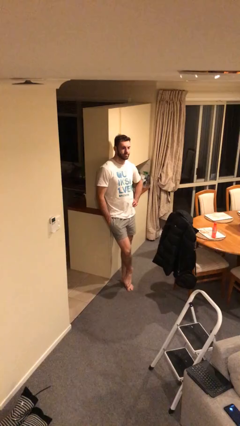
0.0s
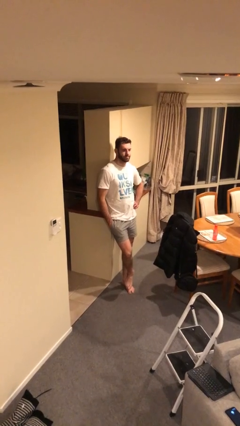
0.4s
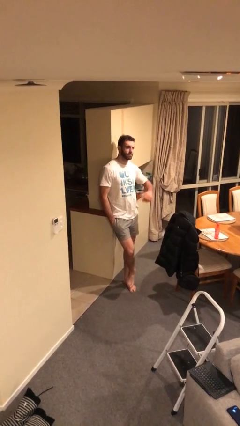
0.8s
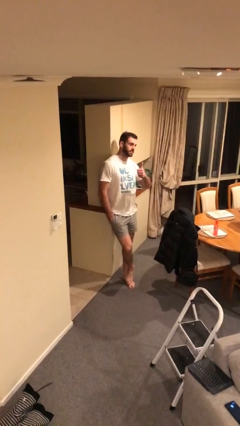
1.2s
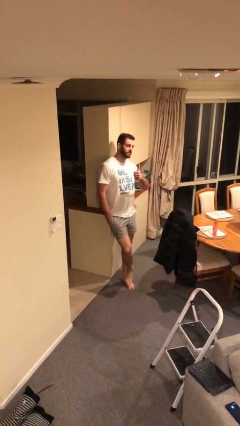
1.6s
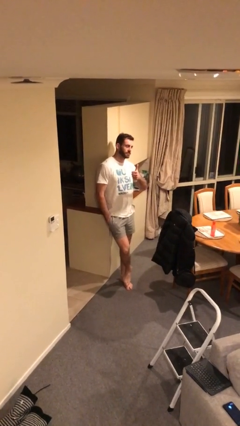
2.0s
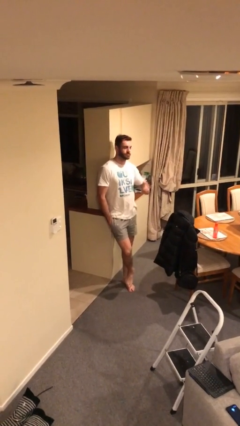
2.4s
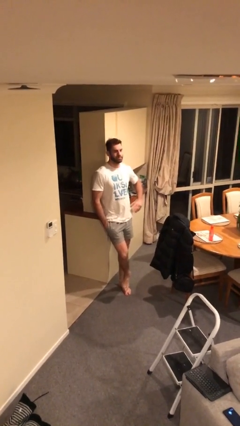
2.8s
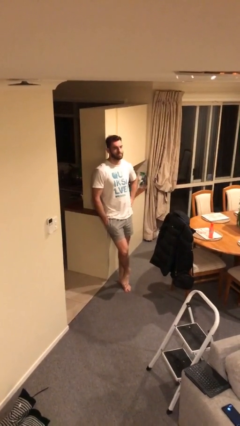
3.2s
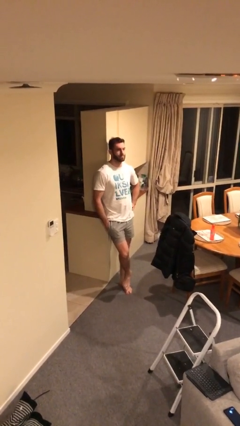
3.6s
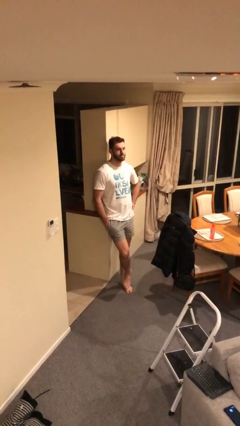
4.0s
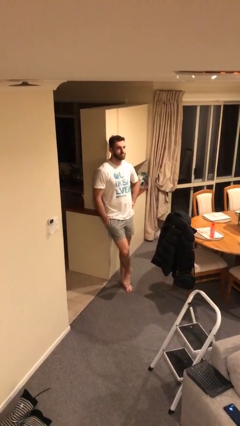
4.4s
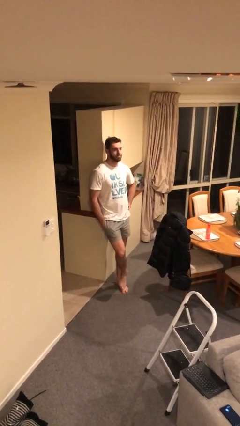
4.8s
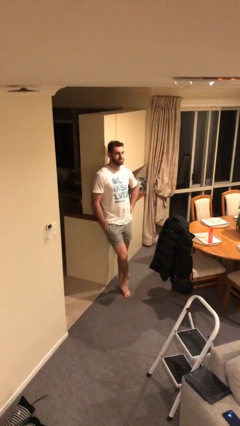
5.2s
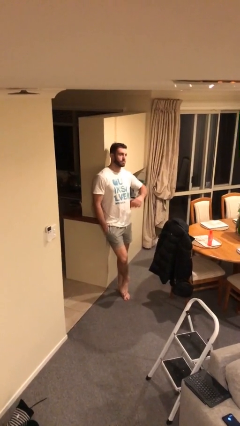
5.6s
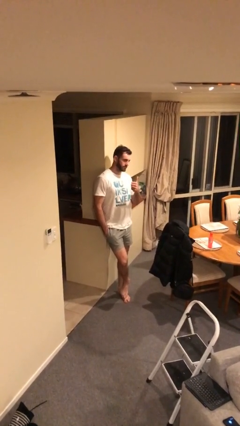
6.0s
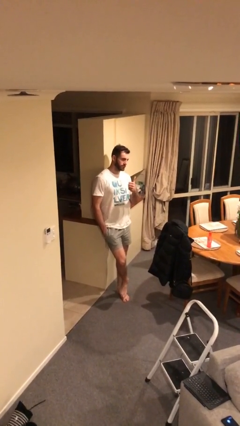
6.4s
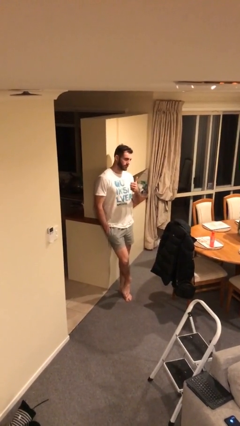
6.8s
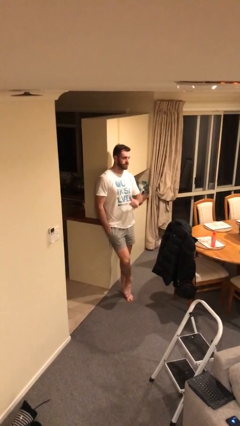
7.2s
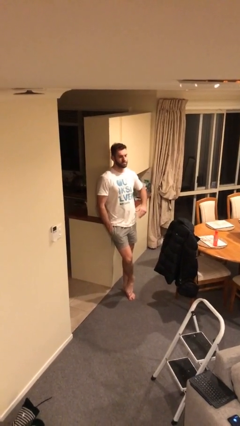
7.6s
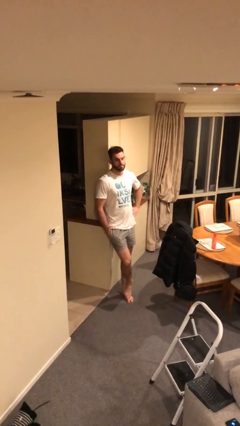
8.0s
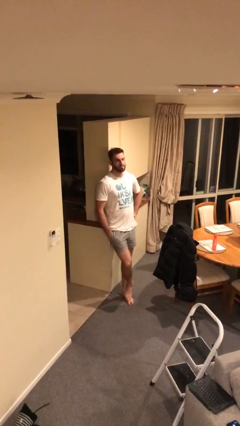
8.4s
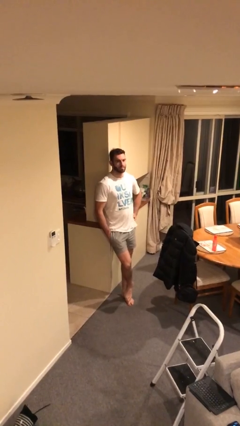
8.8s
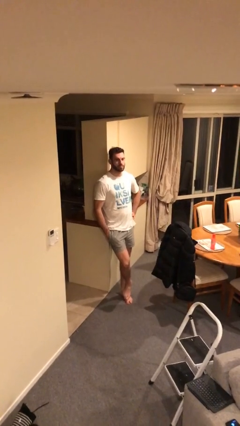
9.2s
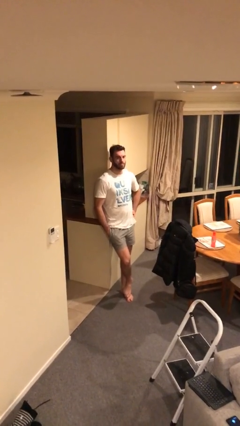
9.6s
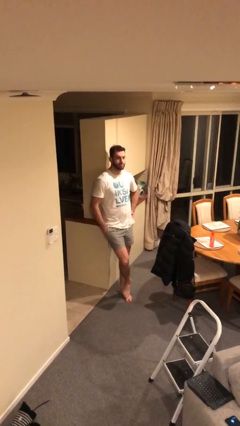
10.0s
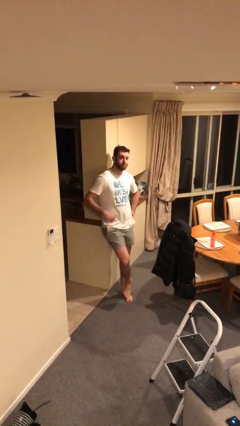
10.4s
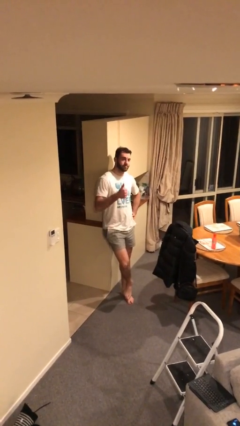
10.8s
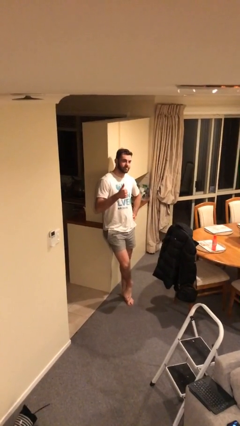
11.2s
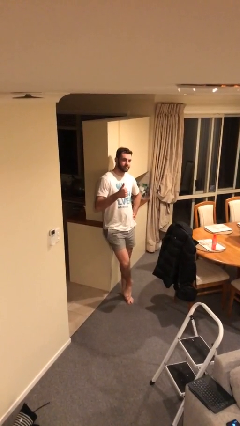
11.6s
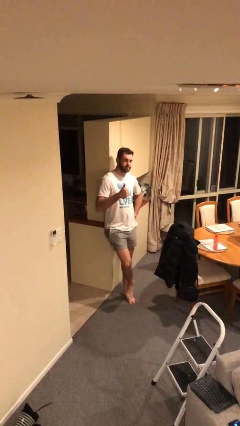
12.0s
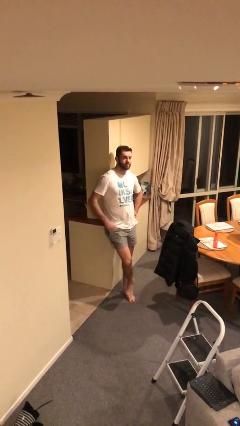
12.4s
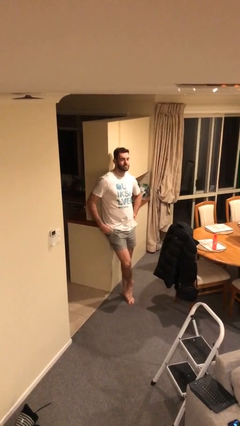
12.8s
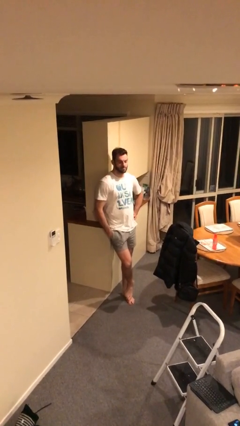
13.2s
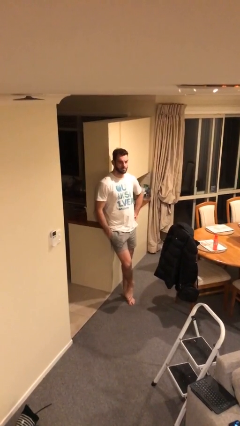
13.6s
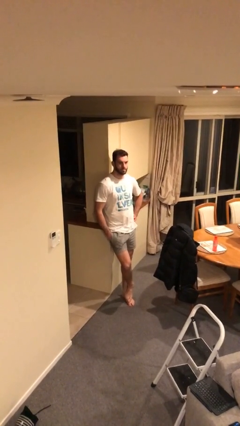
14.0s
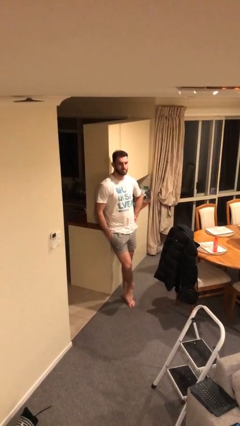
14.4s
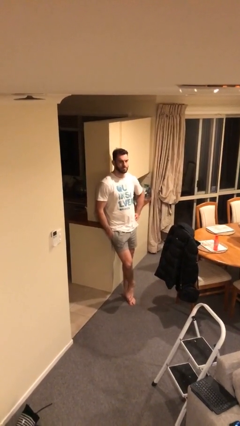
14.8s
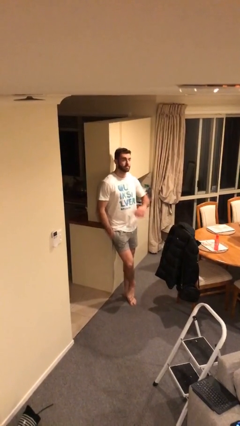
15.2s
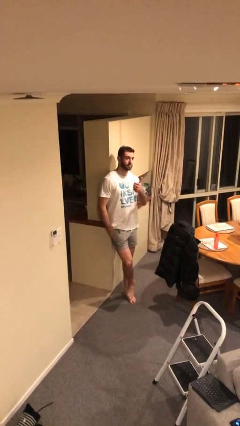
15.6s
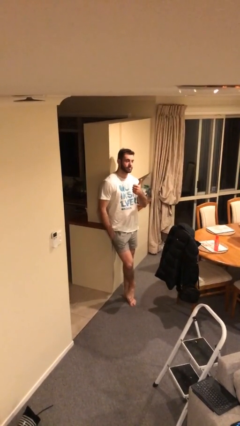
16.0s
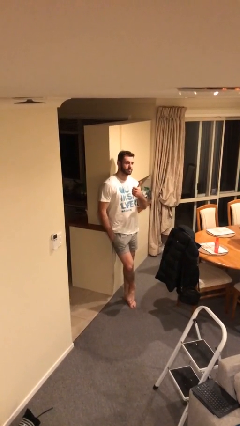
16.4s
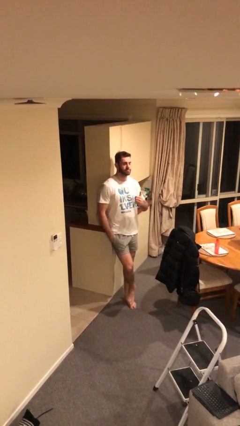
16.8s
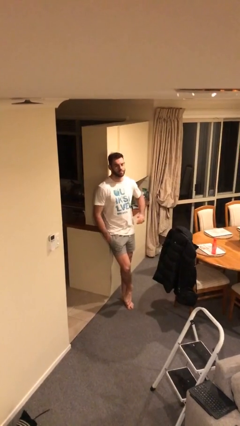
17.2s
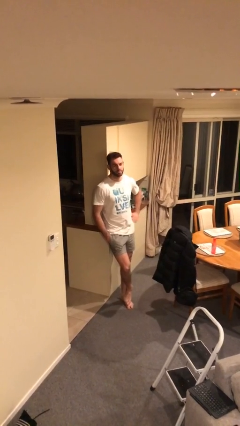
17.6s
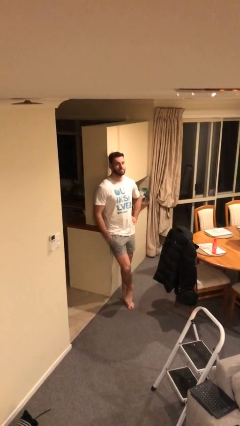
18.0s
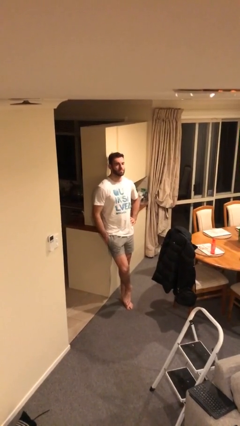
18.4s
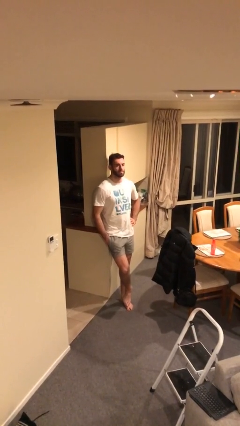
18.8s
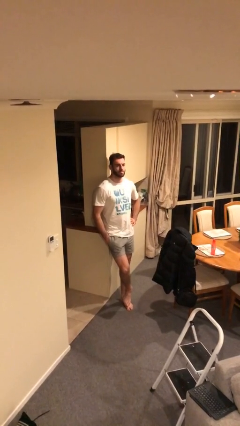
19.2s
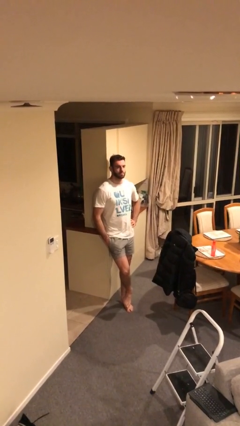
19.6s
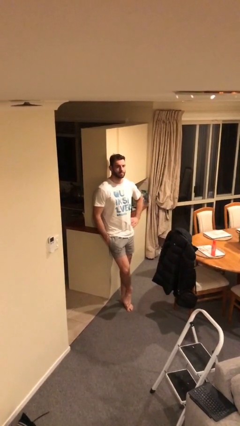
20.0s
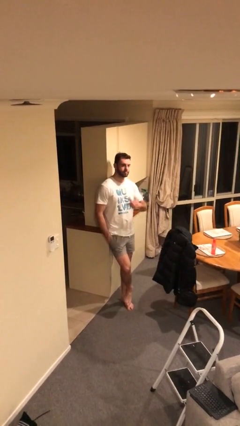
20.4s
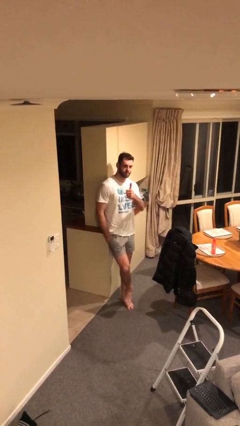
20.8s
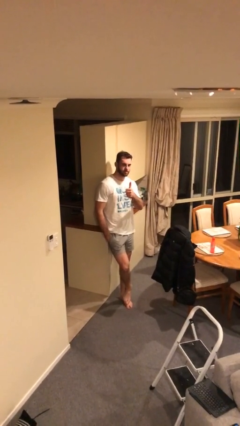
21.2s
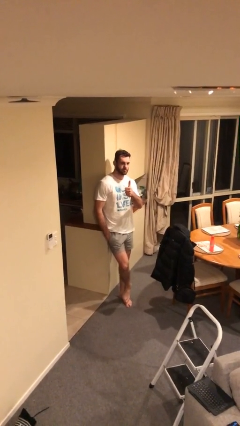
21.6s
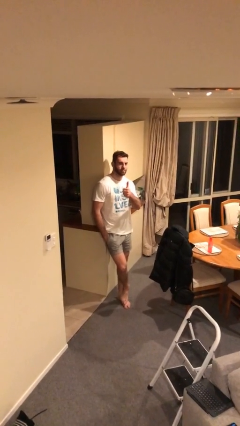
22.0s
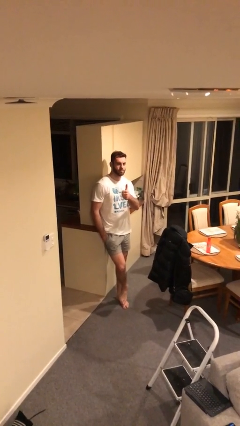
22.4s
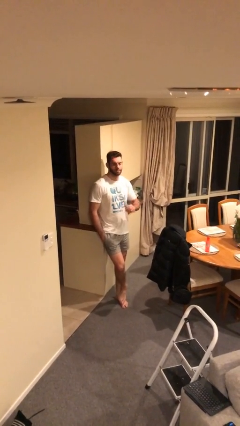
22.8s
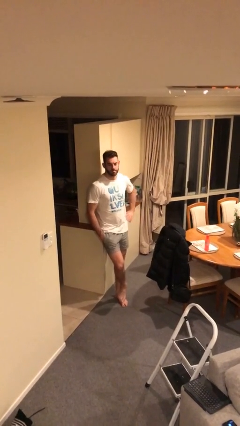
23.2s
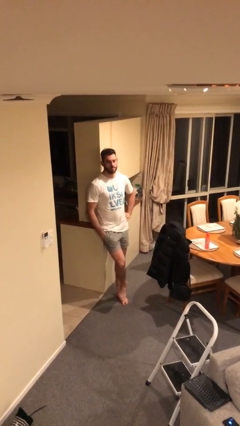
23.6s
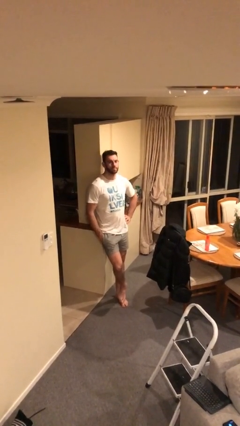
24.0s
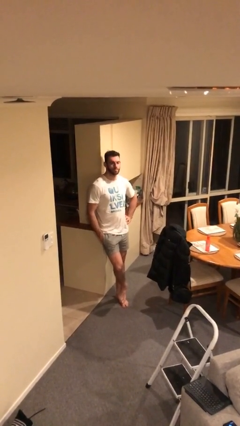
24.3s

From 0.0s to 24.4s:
person gestures thumbs up

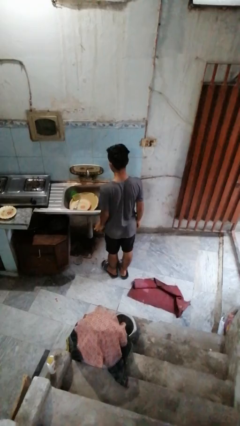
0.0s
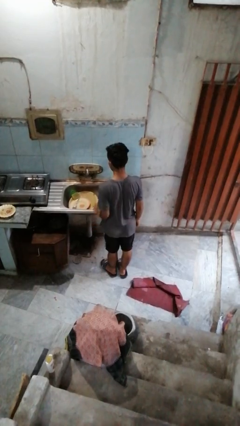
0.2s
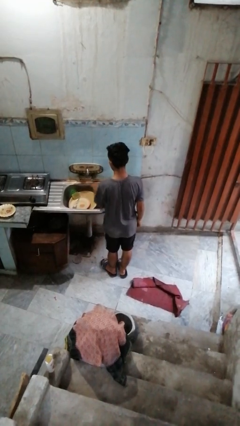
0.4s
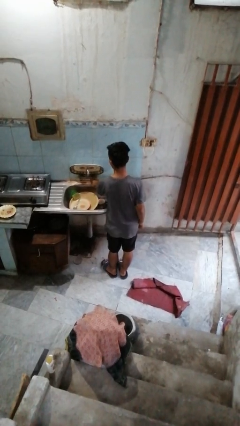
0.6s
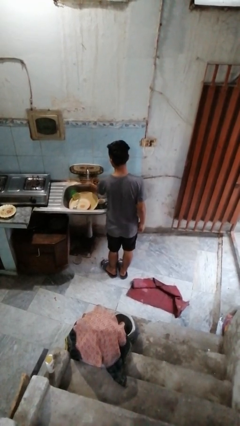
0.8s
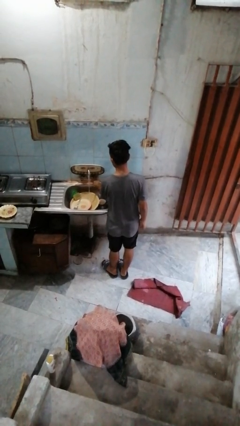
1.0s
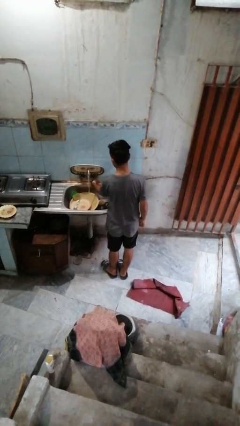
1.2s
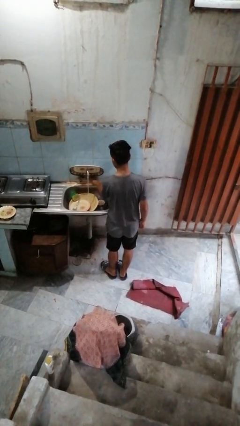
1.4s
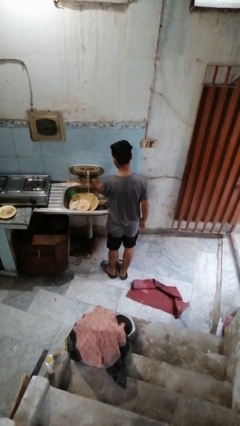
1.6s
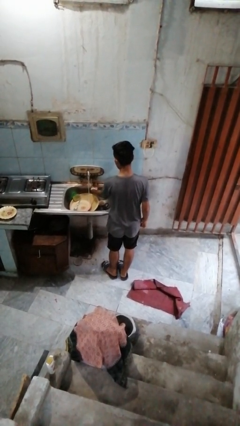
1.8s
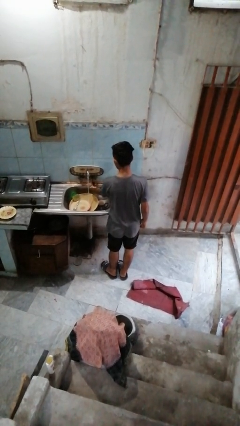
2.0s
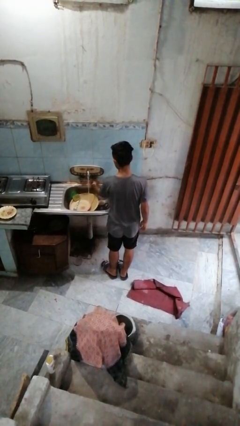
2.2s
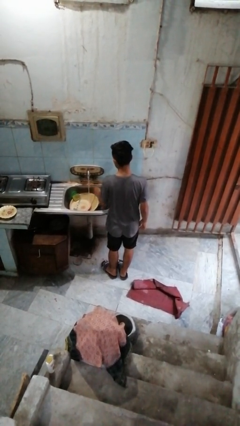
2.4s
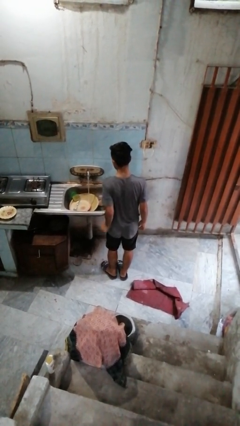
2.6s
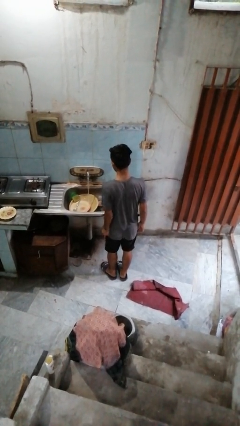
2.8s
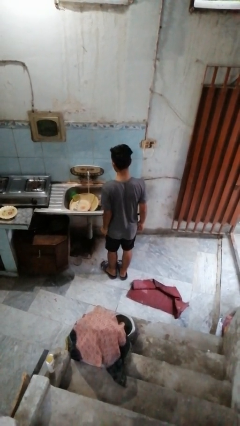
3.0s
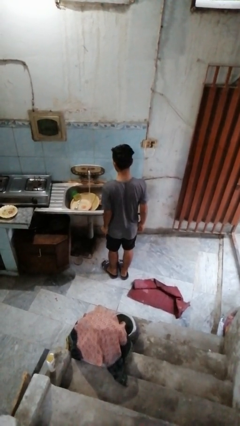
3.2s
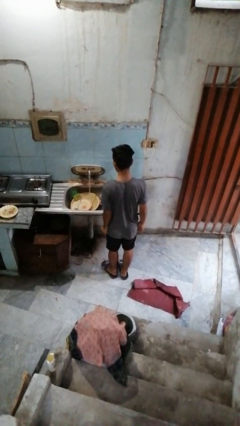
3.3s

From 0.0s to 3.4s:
person turns on faucet

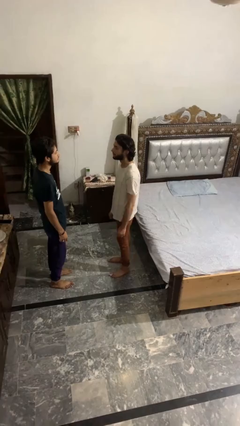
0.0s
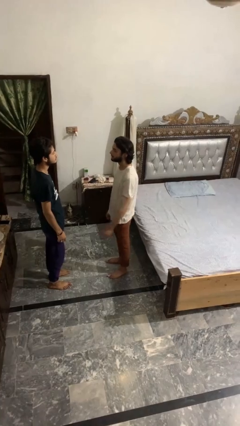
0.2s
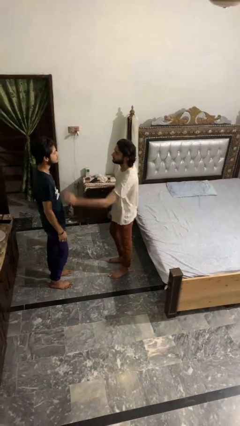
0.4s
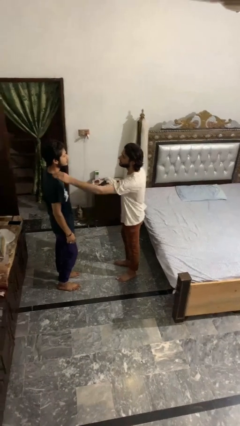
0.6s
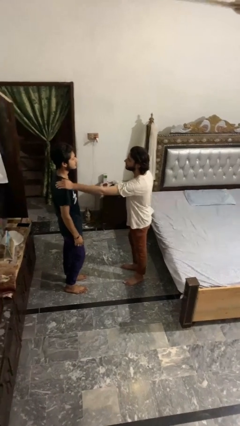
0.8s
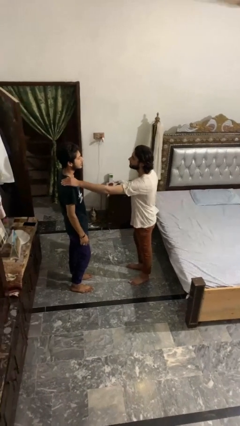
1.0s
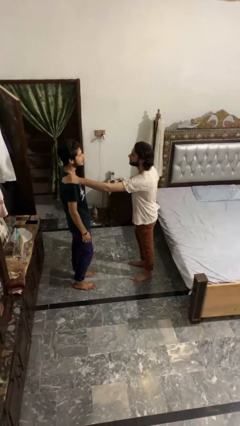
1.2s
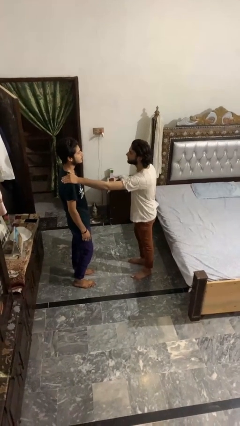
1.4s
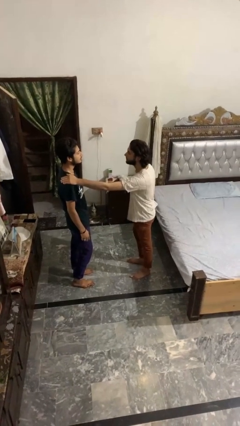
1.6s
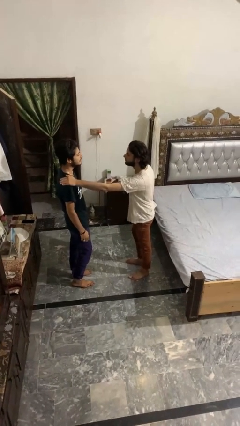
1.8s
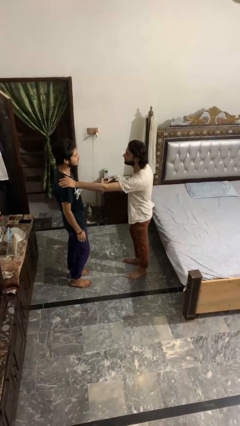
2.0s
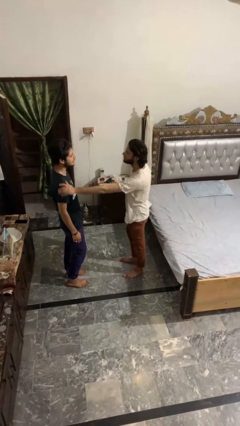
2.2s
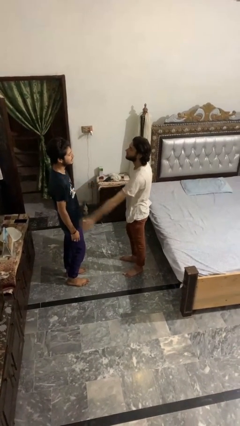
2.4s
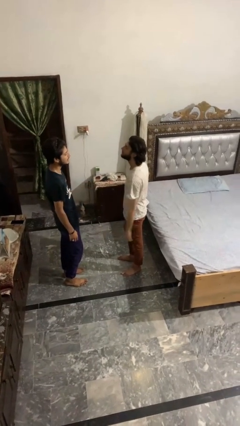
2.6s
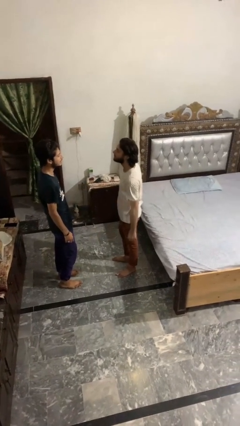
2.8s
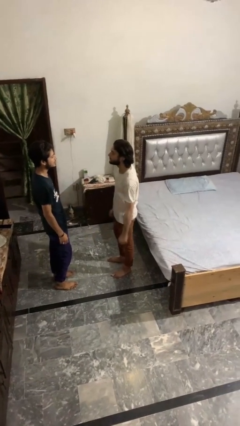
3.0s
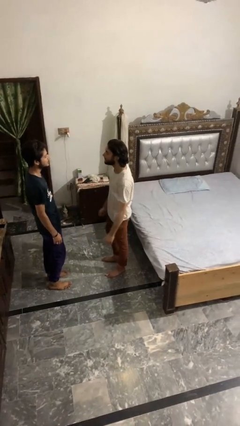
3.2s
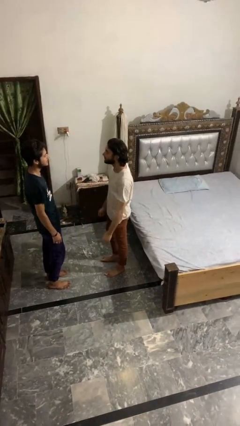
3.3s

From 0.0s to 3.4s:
person pounds shoulders of person
